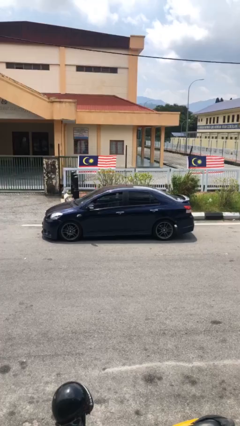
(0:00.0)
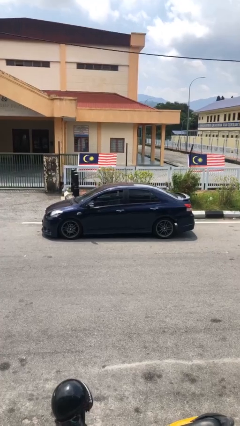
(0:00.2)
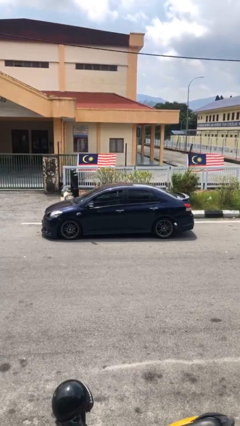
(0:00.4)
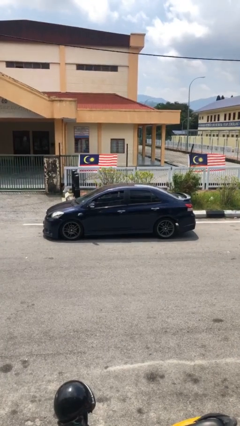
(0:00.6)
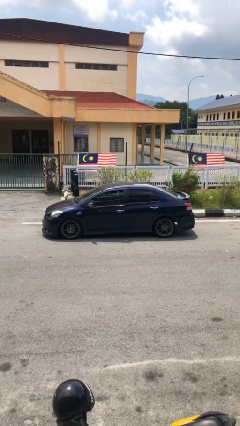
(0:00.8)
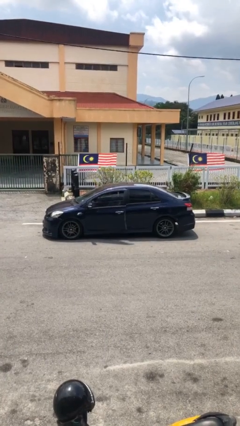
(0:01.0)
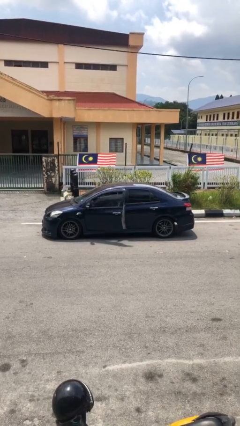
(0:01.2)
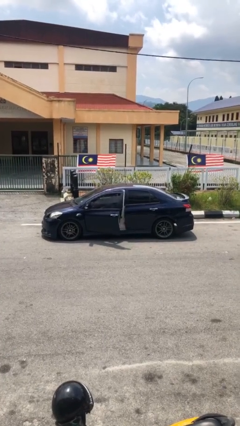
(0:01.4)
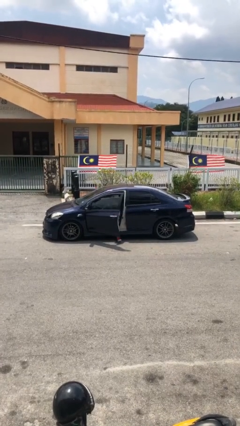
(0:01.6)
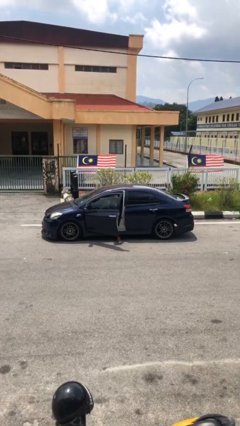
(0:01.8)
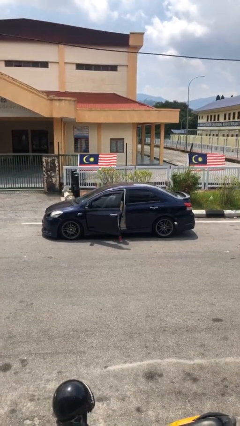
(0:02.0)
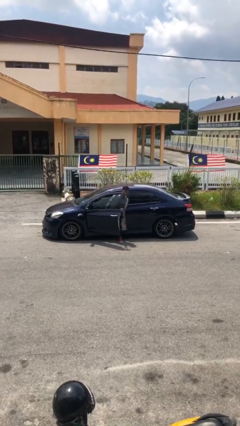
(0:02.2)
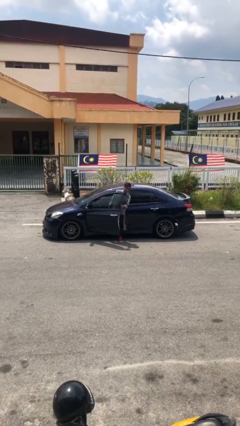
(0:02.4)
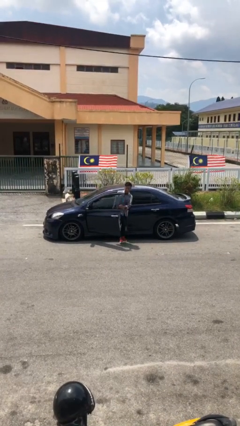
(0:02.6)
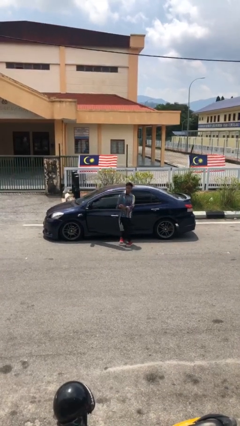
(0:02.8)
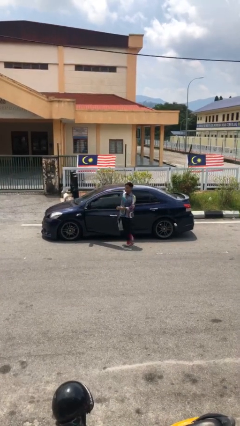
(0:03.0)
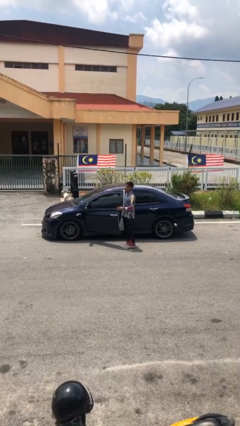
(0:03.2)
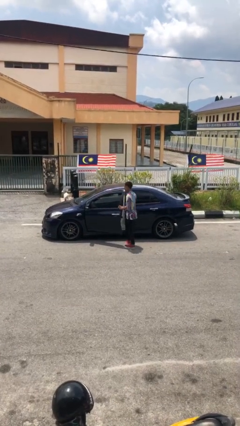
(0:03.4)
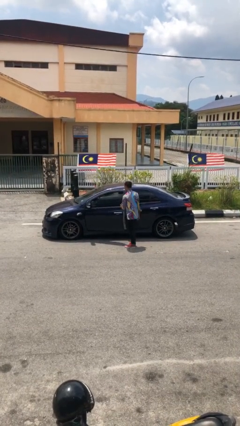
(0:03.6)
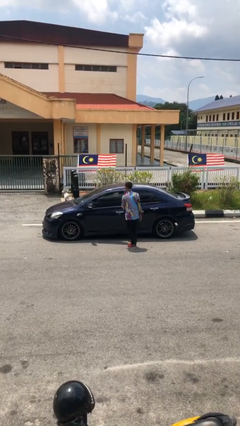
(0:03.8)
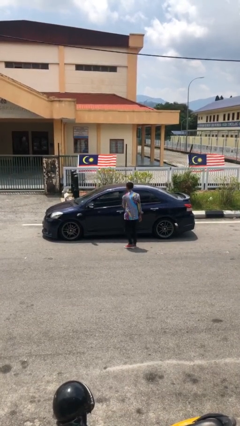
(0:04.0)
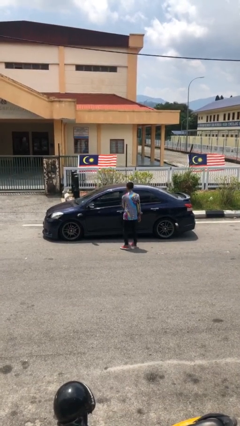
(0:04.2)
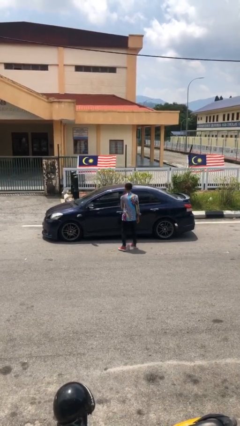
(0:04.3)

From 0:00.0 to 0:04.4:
car drops off person

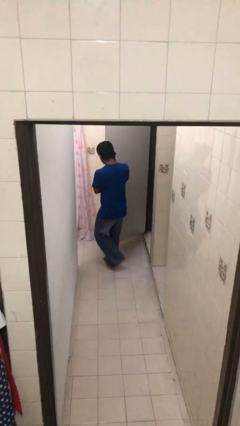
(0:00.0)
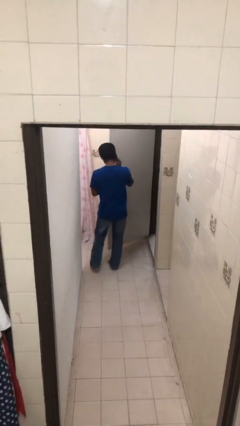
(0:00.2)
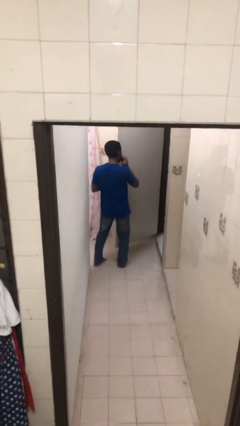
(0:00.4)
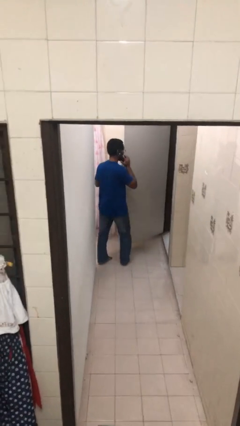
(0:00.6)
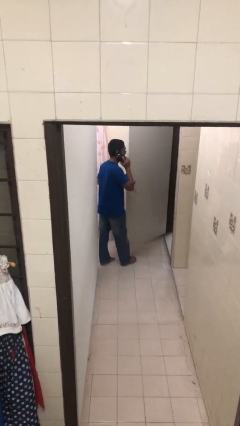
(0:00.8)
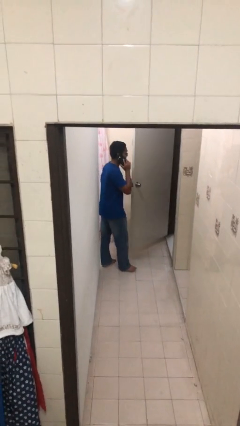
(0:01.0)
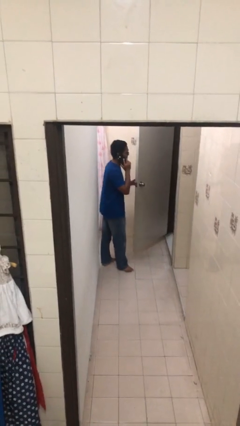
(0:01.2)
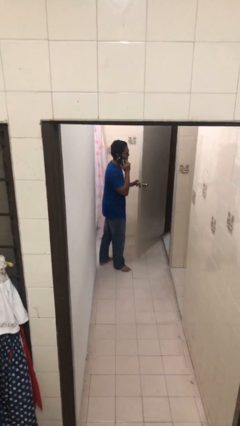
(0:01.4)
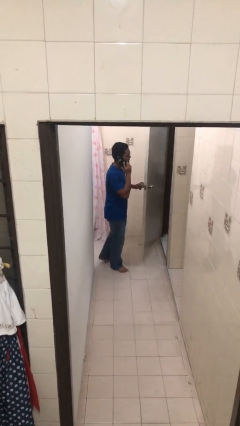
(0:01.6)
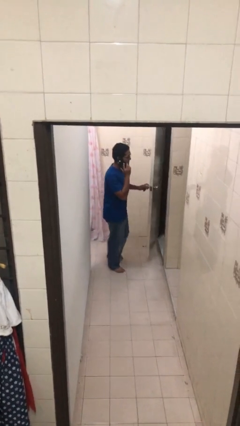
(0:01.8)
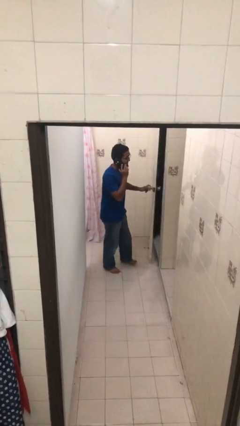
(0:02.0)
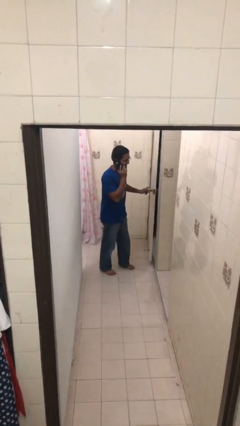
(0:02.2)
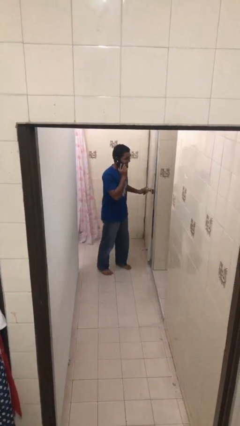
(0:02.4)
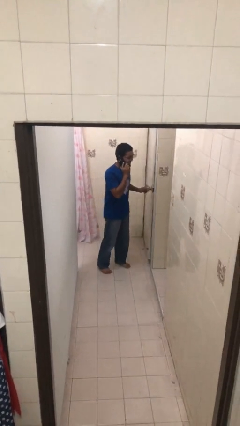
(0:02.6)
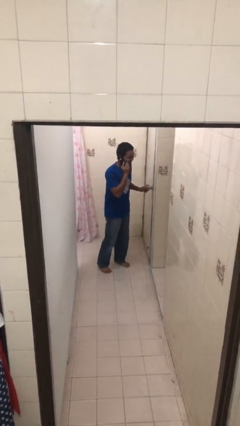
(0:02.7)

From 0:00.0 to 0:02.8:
person closes facility door

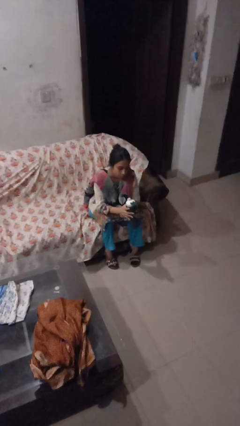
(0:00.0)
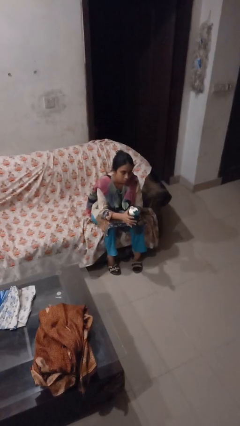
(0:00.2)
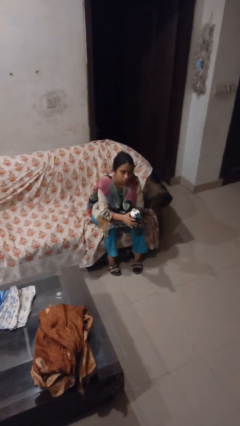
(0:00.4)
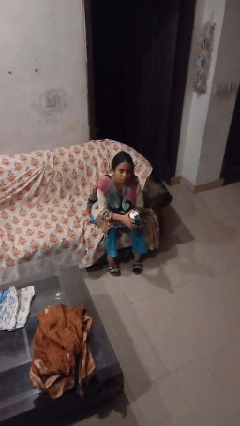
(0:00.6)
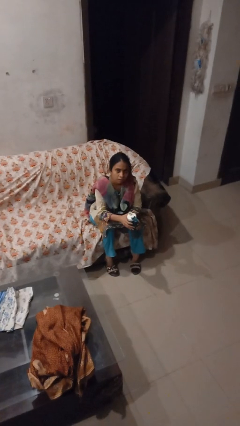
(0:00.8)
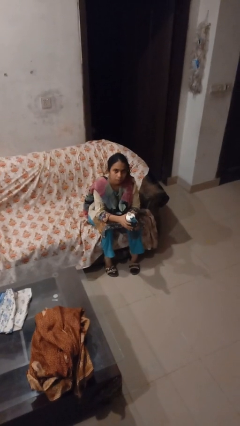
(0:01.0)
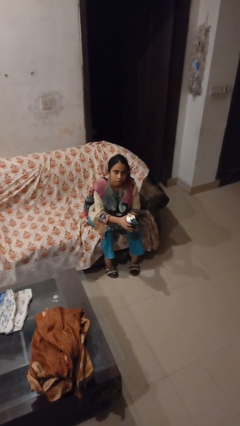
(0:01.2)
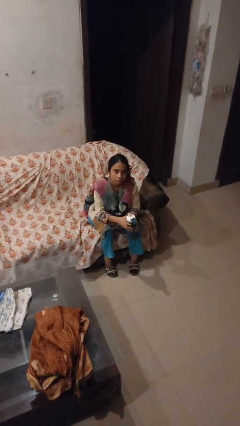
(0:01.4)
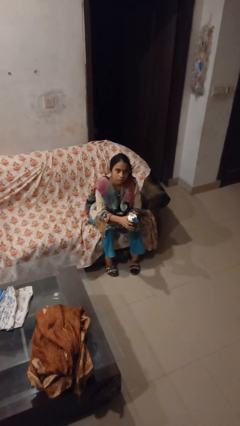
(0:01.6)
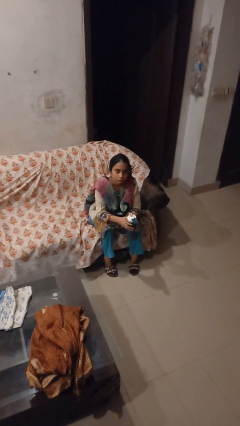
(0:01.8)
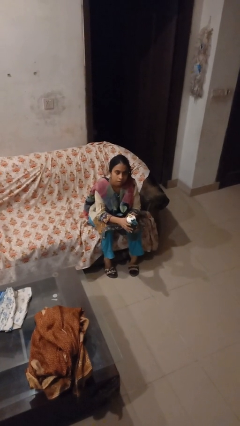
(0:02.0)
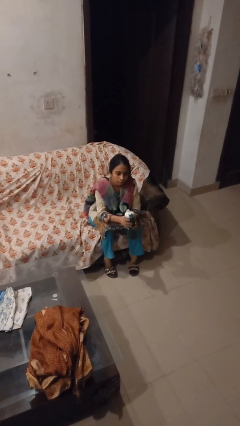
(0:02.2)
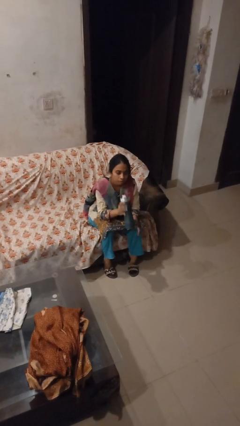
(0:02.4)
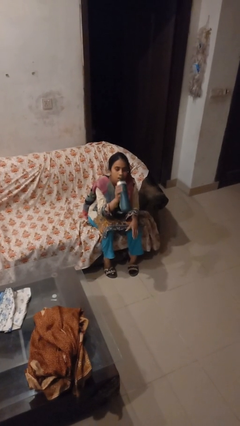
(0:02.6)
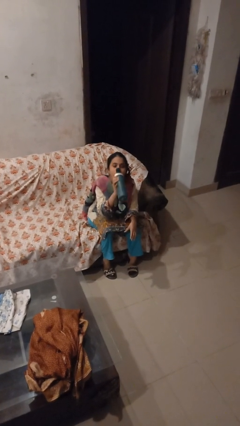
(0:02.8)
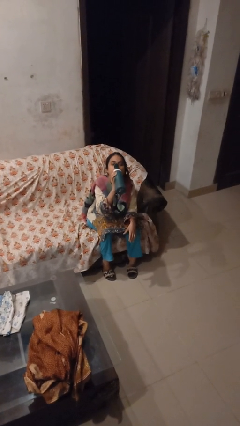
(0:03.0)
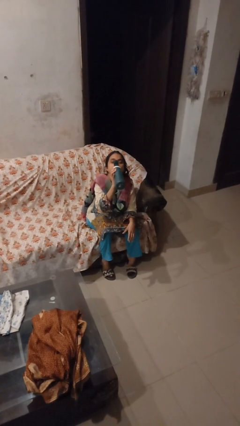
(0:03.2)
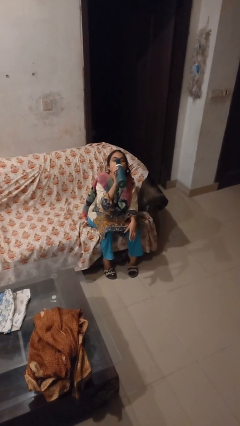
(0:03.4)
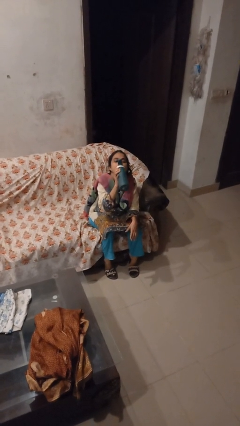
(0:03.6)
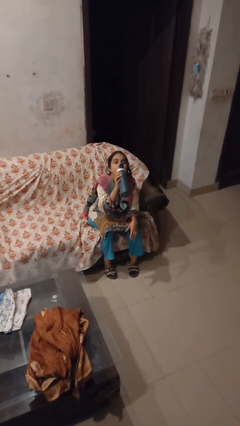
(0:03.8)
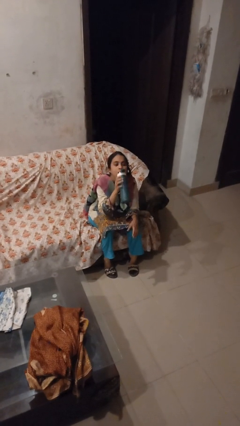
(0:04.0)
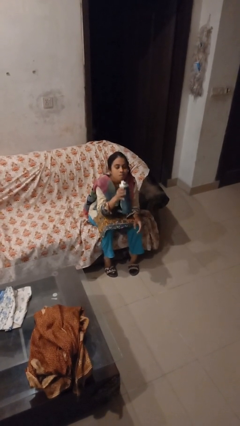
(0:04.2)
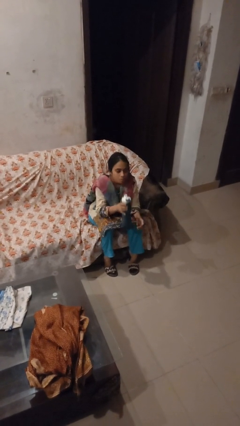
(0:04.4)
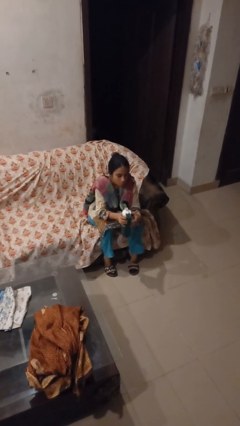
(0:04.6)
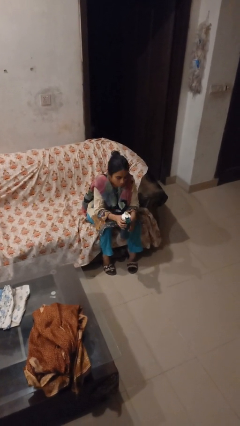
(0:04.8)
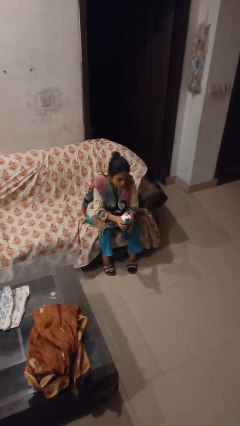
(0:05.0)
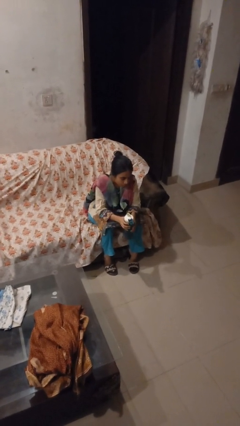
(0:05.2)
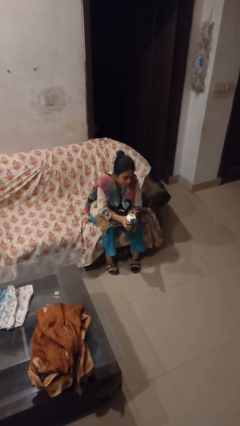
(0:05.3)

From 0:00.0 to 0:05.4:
person drinks from bottle

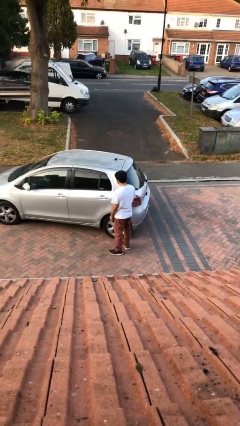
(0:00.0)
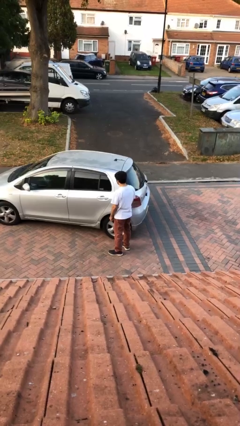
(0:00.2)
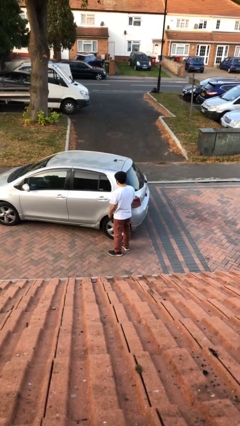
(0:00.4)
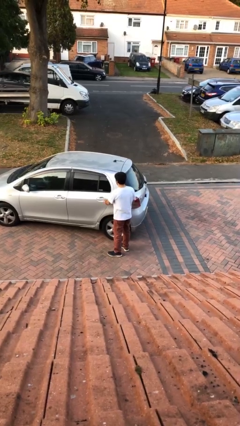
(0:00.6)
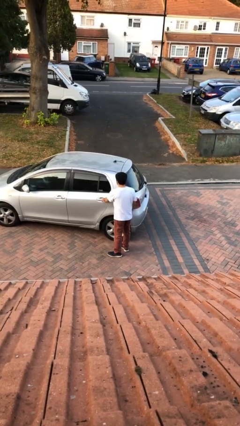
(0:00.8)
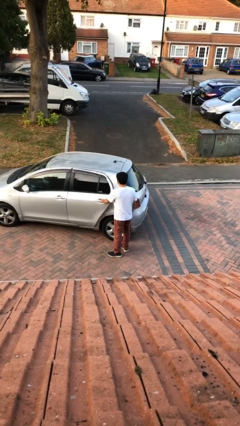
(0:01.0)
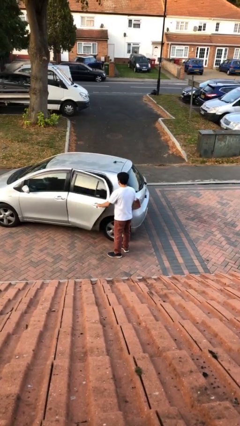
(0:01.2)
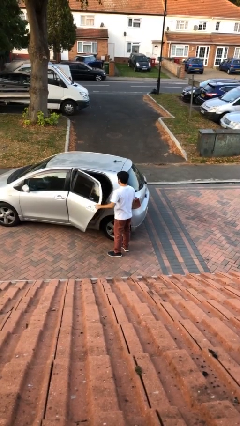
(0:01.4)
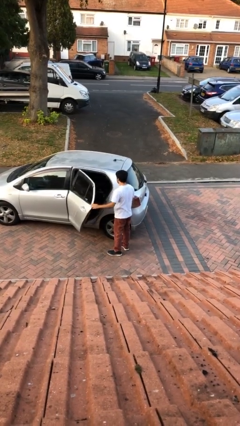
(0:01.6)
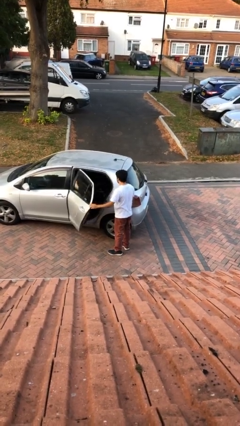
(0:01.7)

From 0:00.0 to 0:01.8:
person opens car door

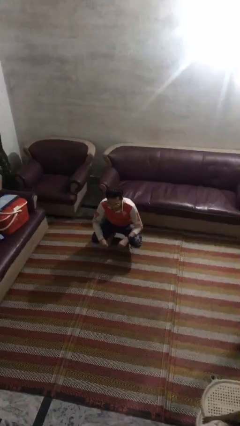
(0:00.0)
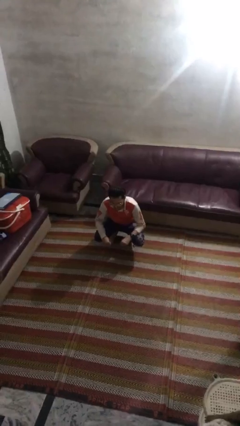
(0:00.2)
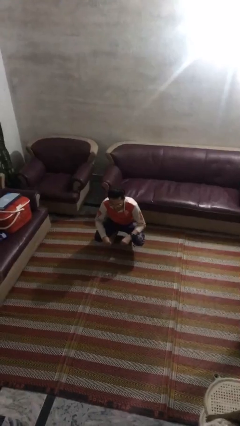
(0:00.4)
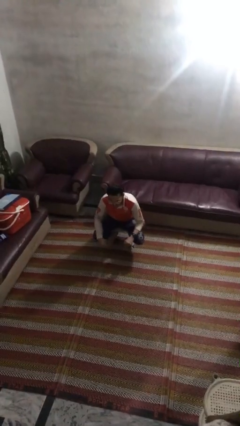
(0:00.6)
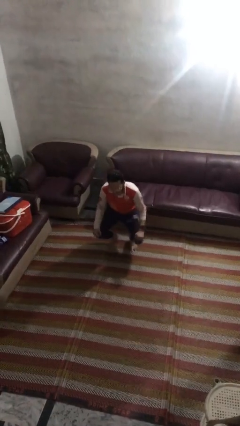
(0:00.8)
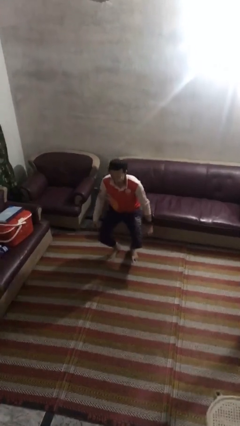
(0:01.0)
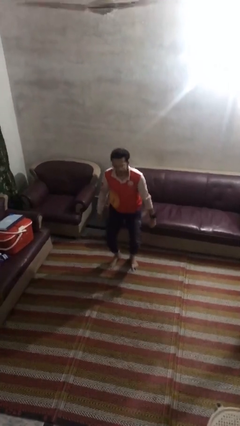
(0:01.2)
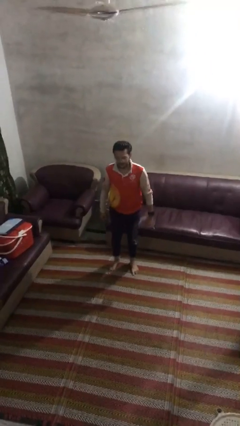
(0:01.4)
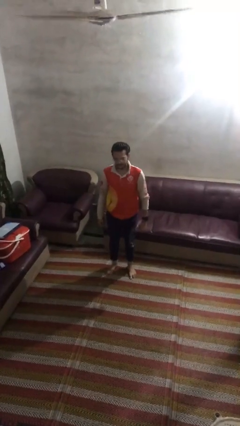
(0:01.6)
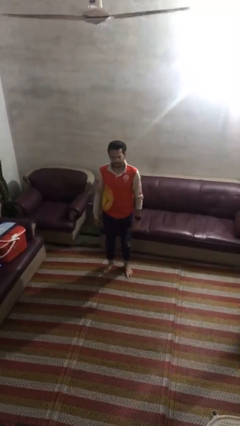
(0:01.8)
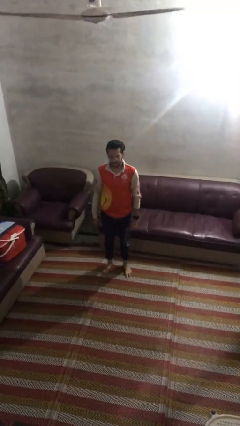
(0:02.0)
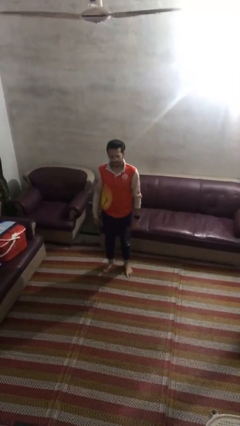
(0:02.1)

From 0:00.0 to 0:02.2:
person stands up

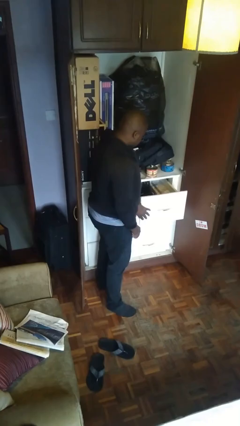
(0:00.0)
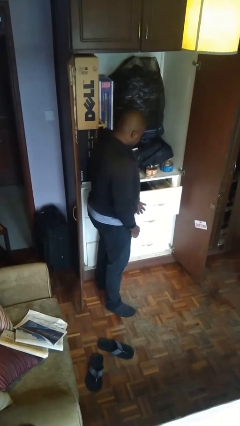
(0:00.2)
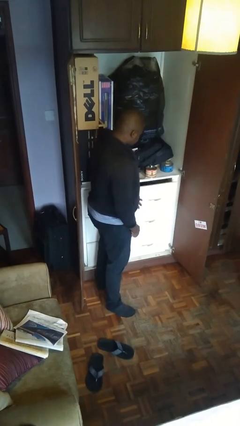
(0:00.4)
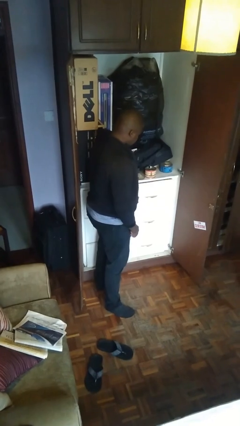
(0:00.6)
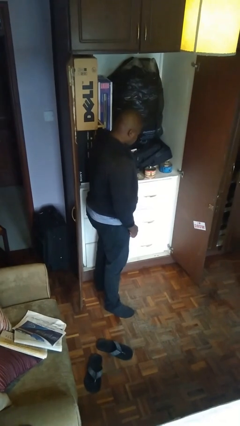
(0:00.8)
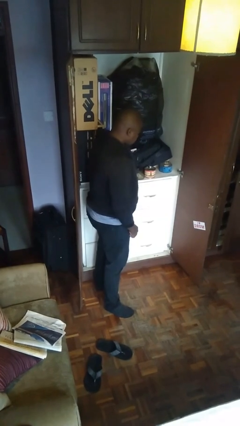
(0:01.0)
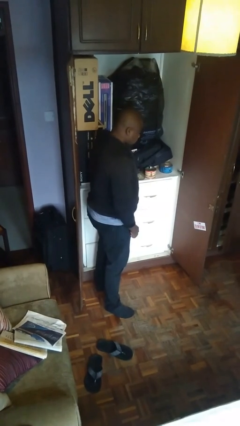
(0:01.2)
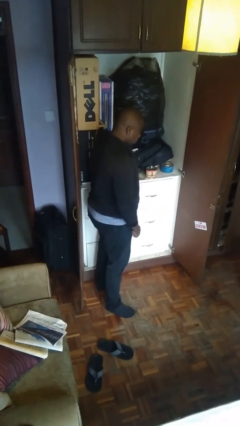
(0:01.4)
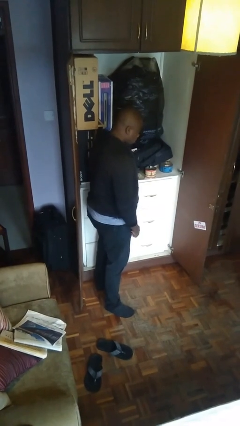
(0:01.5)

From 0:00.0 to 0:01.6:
person closes dresser drawer
